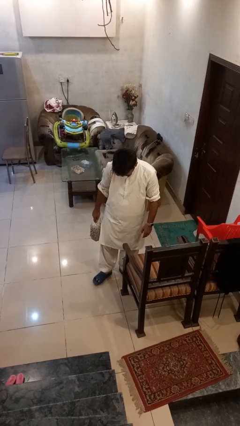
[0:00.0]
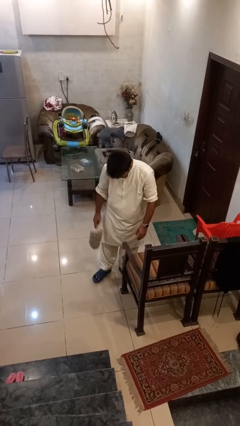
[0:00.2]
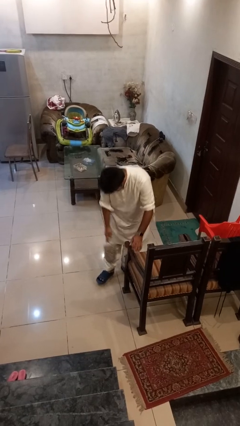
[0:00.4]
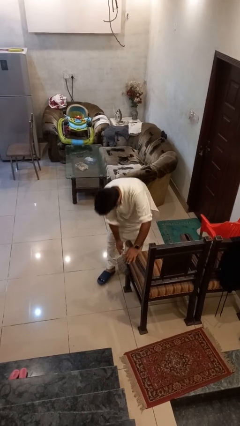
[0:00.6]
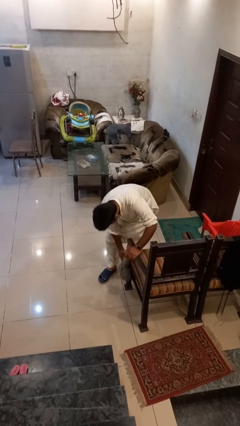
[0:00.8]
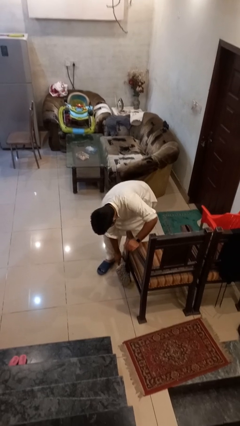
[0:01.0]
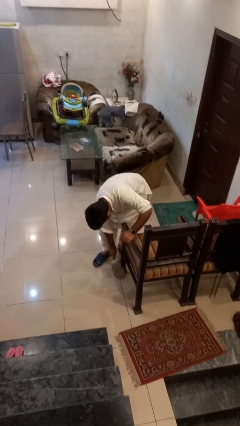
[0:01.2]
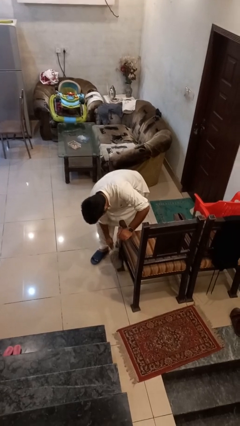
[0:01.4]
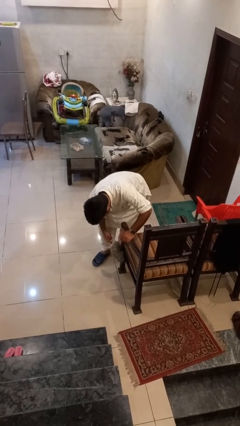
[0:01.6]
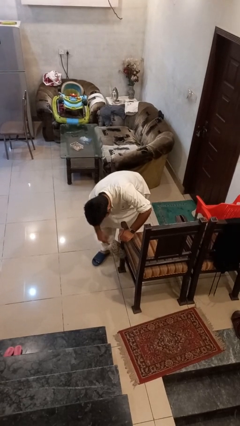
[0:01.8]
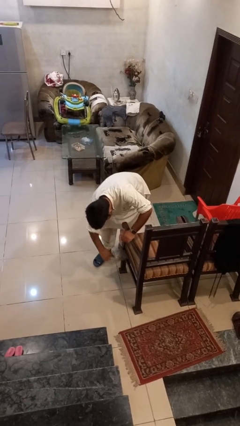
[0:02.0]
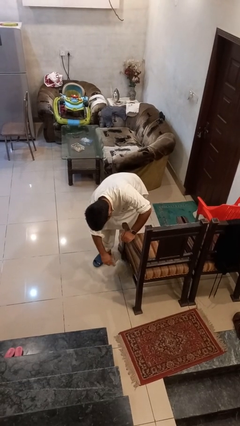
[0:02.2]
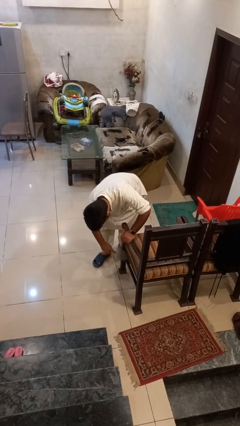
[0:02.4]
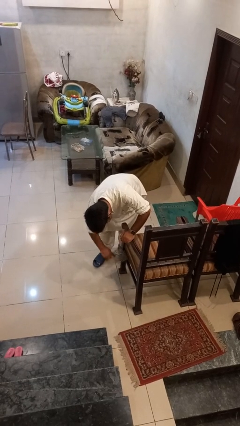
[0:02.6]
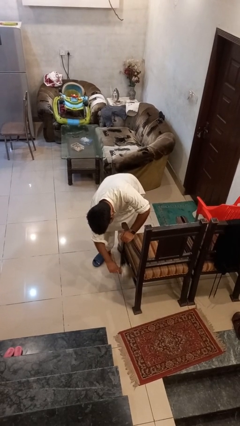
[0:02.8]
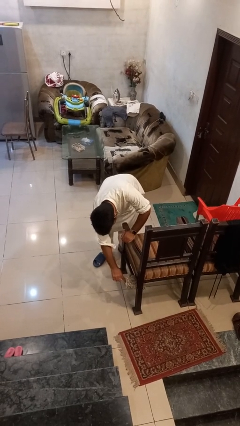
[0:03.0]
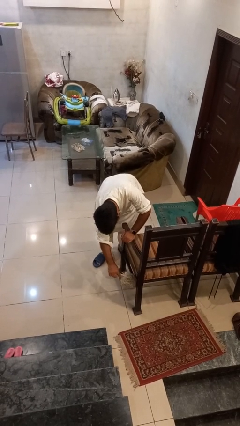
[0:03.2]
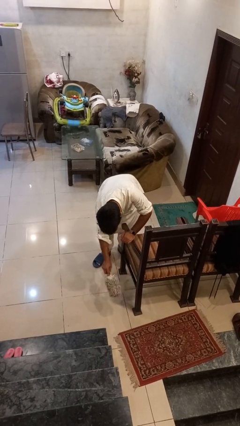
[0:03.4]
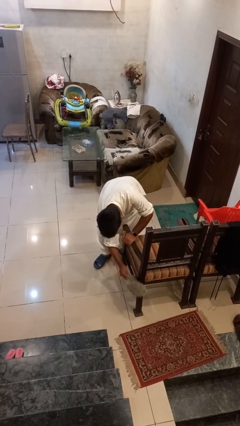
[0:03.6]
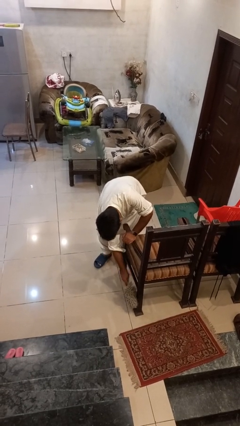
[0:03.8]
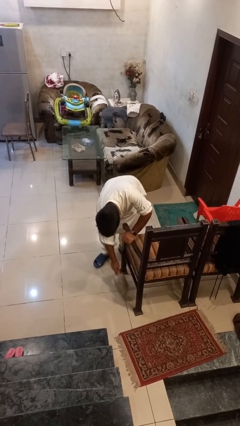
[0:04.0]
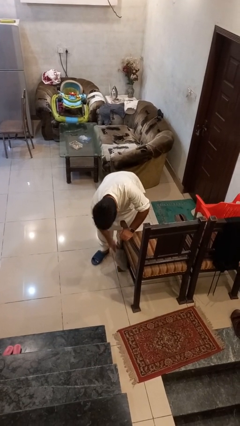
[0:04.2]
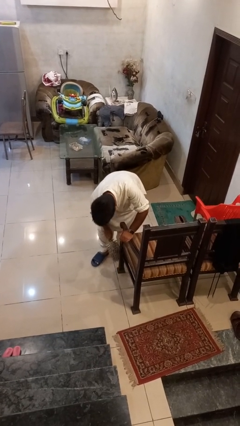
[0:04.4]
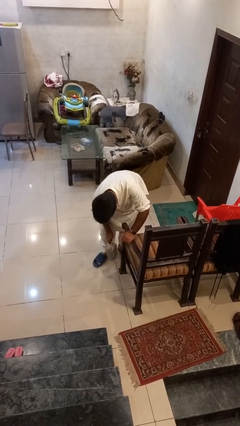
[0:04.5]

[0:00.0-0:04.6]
person dusts furniture

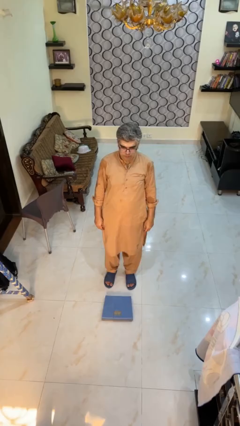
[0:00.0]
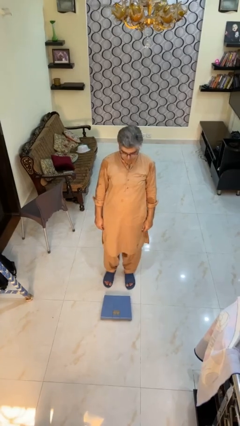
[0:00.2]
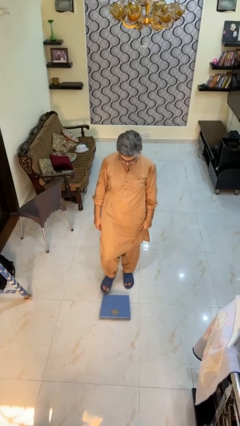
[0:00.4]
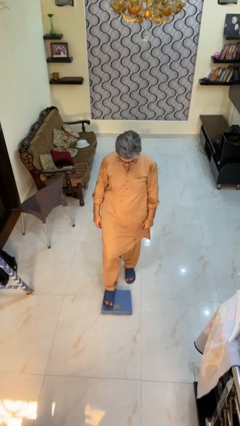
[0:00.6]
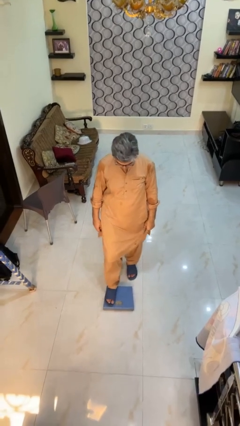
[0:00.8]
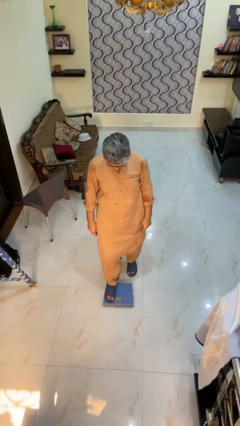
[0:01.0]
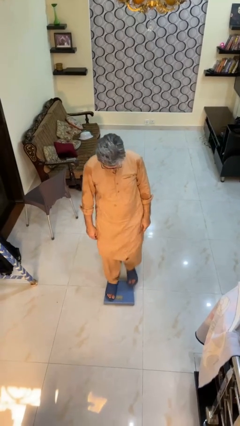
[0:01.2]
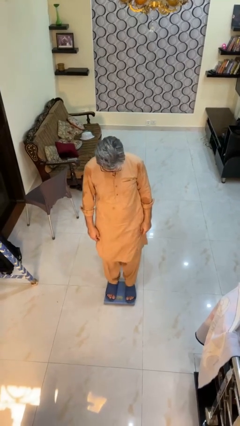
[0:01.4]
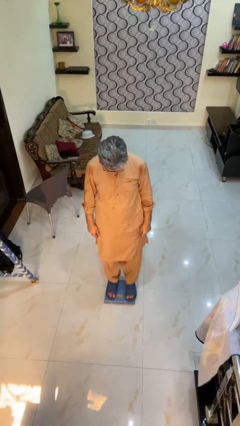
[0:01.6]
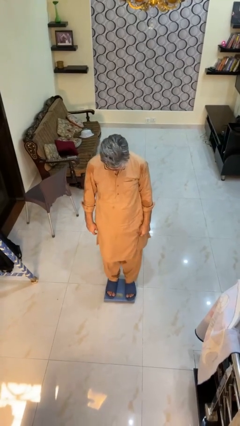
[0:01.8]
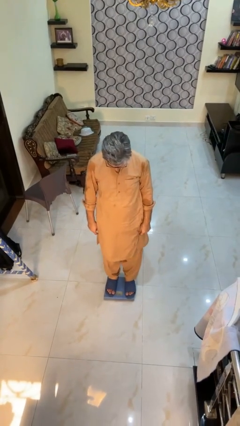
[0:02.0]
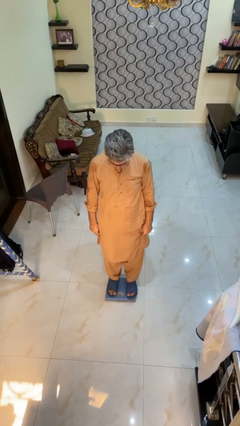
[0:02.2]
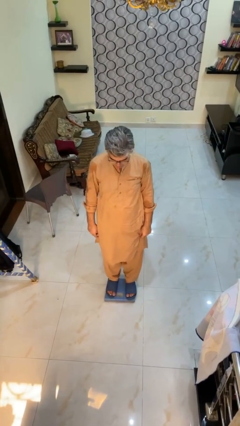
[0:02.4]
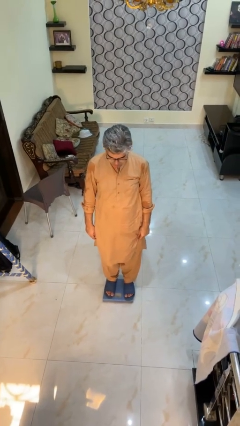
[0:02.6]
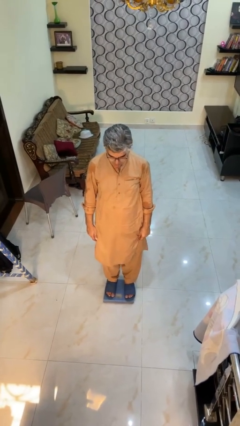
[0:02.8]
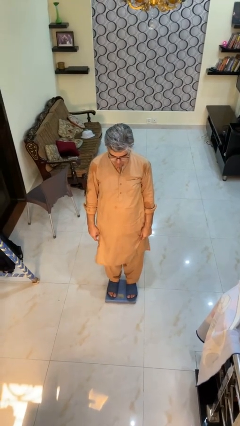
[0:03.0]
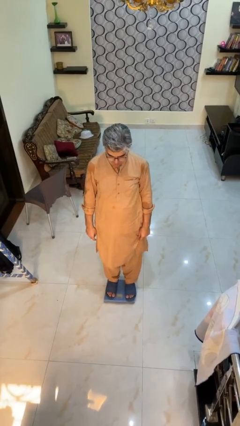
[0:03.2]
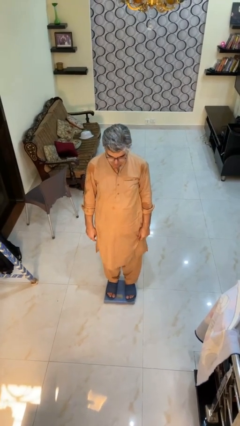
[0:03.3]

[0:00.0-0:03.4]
person uses bodyweight scale

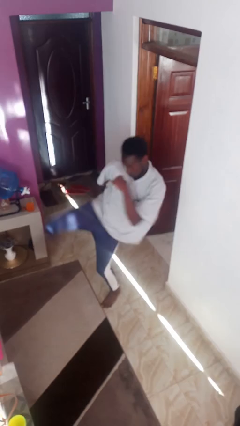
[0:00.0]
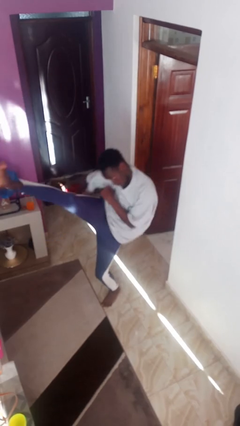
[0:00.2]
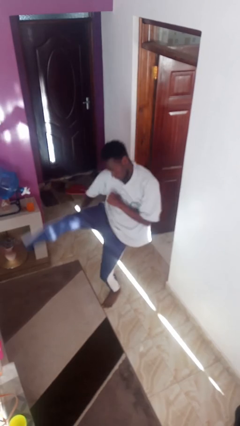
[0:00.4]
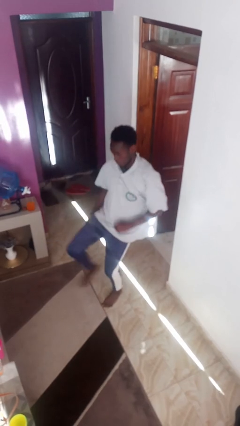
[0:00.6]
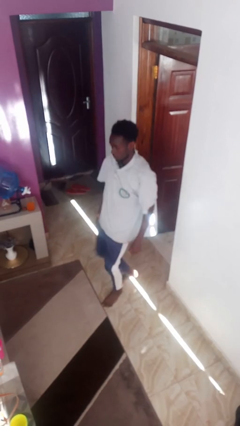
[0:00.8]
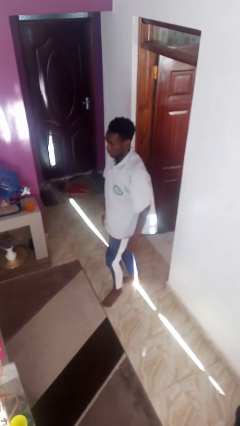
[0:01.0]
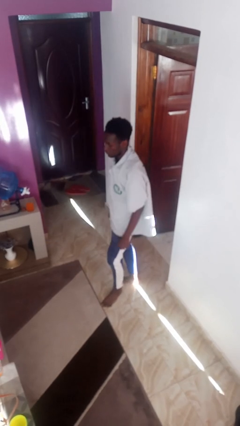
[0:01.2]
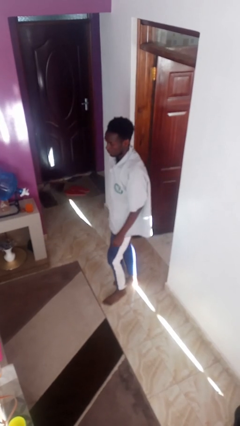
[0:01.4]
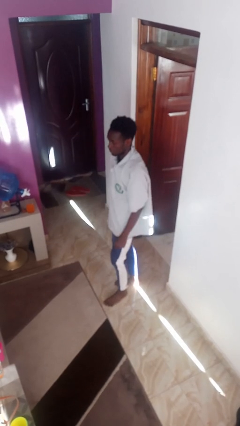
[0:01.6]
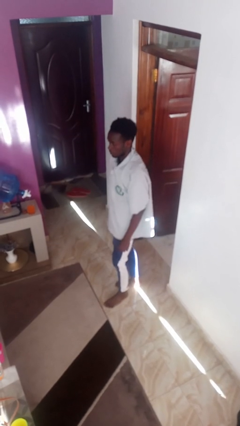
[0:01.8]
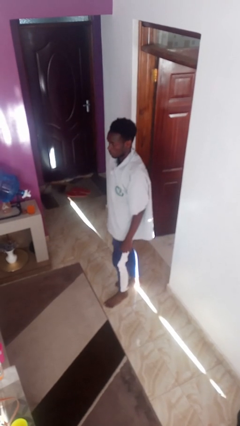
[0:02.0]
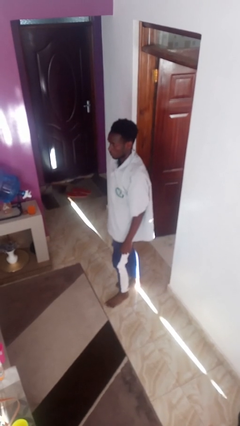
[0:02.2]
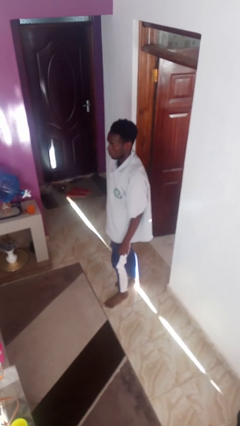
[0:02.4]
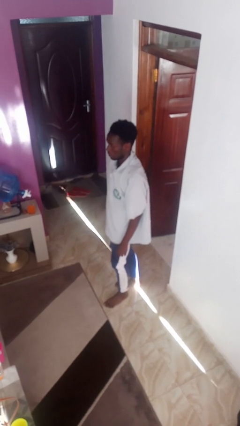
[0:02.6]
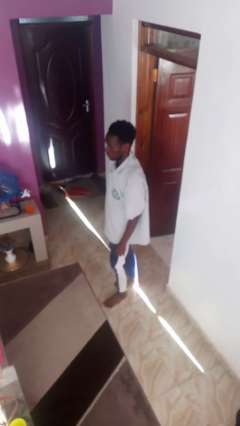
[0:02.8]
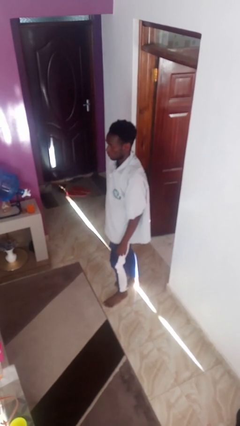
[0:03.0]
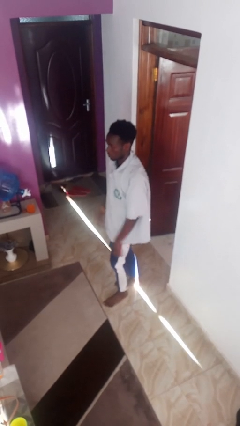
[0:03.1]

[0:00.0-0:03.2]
person karate kicks

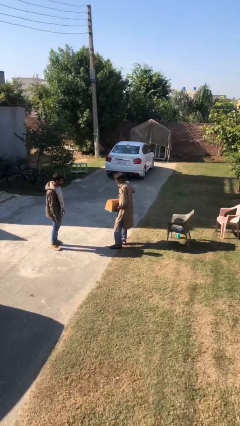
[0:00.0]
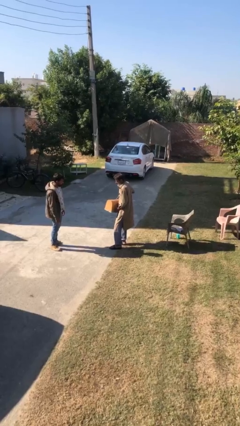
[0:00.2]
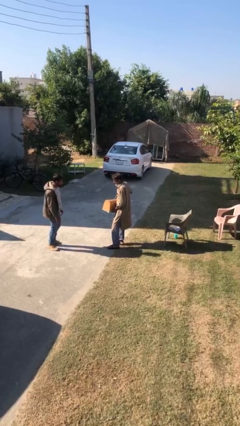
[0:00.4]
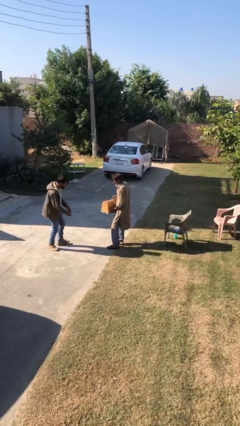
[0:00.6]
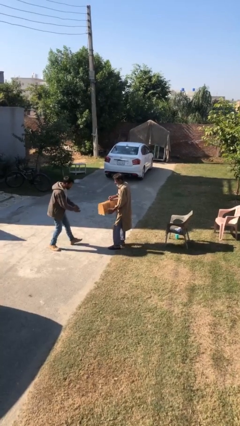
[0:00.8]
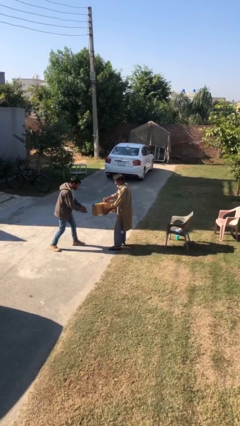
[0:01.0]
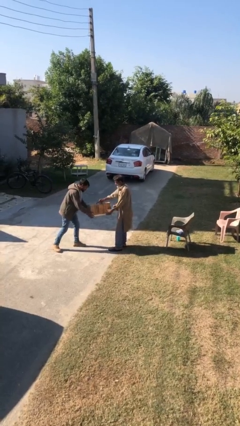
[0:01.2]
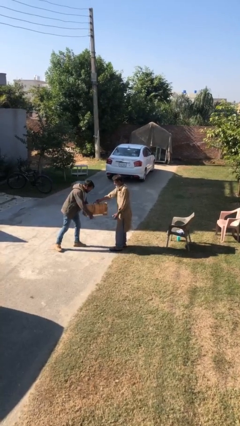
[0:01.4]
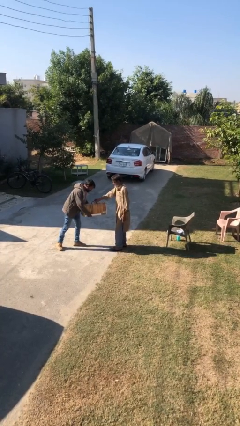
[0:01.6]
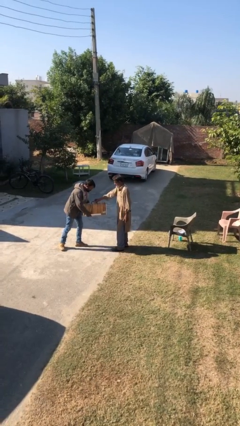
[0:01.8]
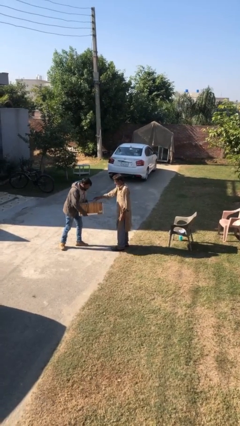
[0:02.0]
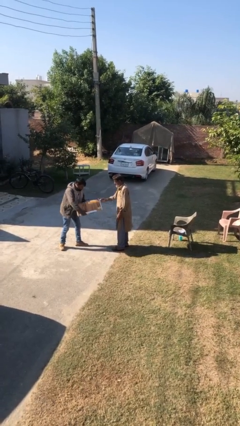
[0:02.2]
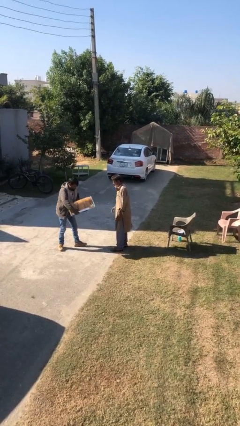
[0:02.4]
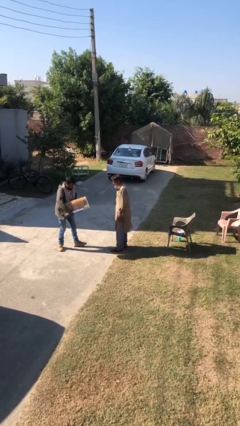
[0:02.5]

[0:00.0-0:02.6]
person transfers object to person

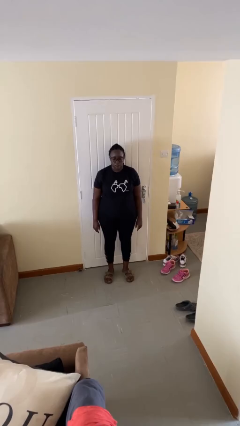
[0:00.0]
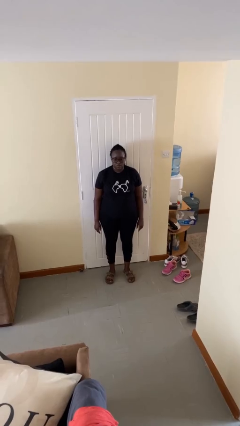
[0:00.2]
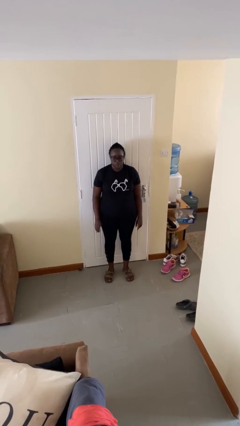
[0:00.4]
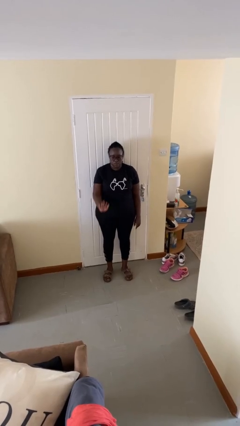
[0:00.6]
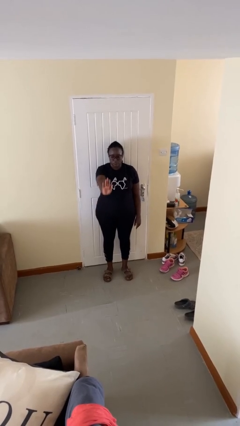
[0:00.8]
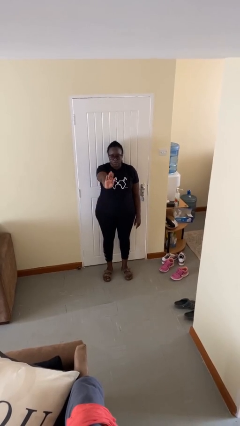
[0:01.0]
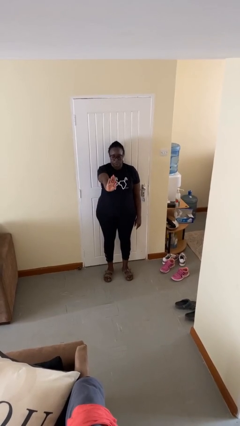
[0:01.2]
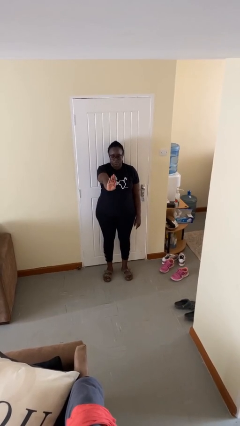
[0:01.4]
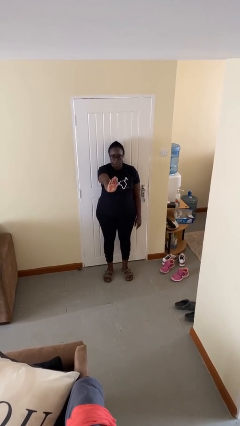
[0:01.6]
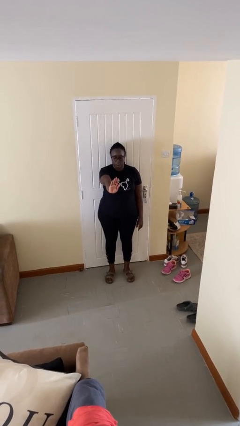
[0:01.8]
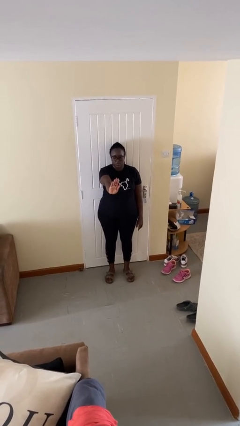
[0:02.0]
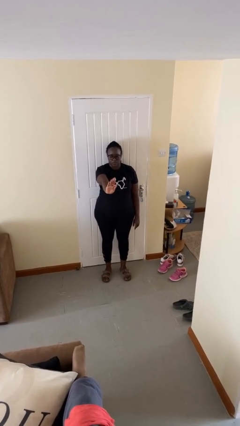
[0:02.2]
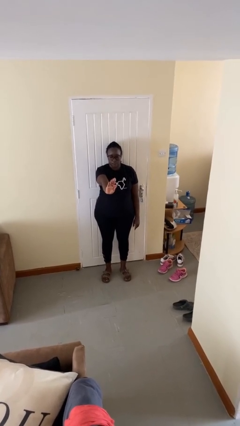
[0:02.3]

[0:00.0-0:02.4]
person gestures stop

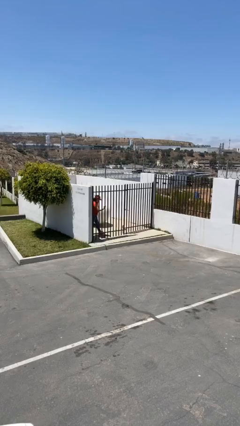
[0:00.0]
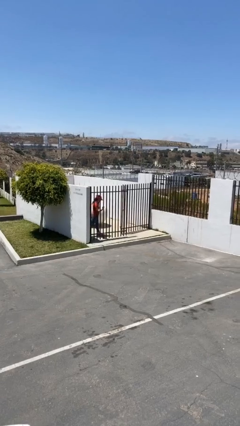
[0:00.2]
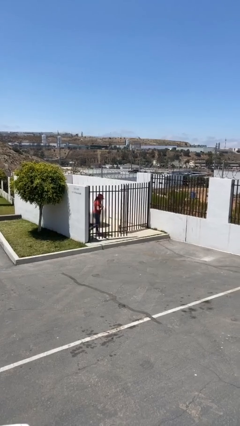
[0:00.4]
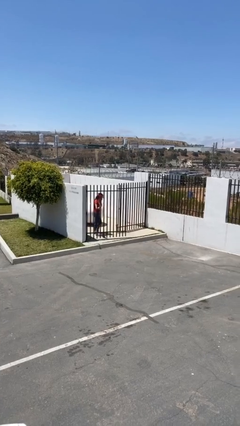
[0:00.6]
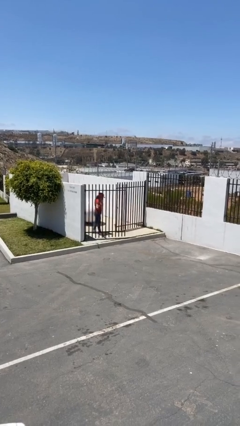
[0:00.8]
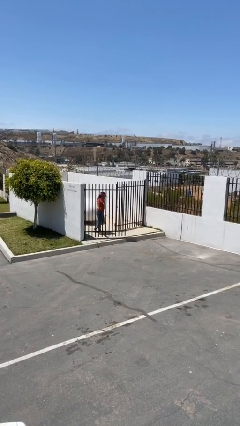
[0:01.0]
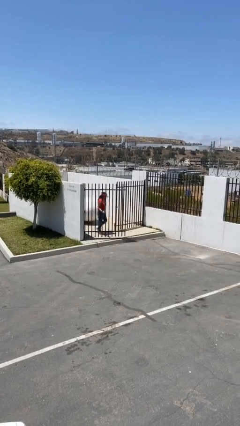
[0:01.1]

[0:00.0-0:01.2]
person opens facility door

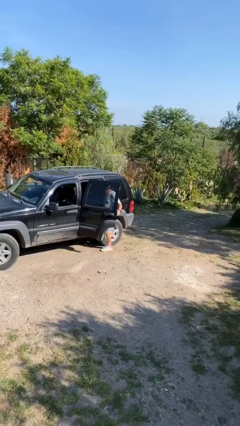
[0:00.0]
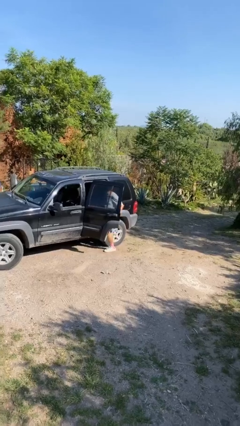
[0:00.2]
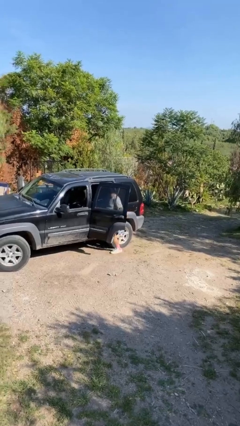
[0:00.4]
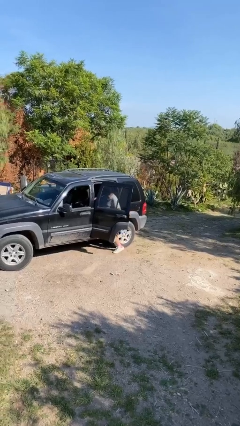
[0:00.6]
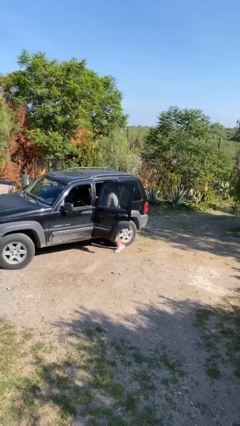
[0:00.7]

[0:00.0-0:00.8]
person enters car
